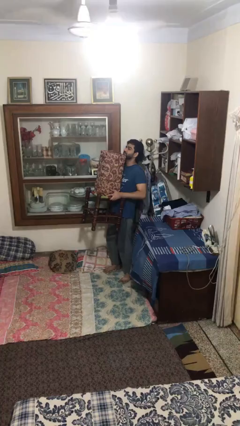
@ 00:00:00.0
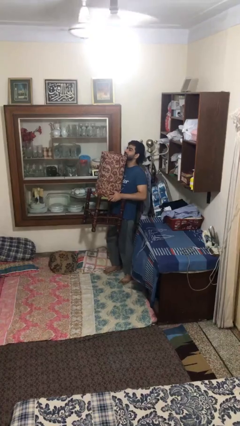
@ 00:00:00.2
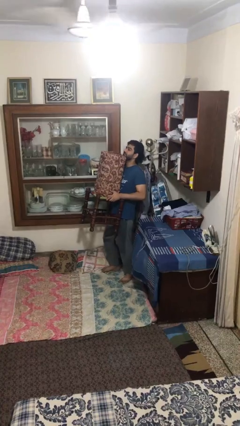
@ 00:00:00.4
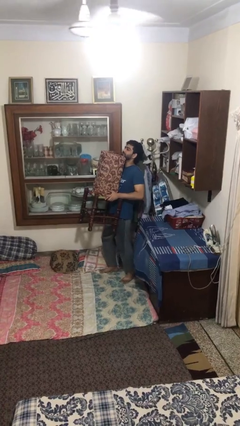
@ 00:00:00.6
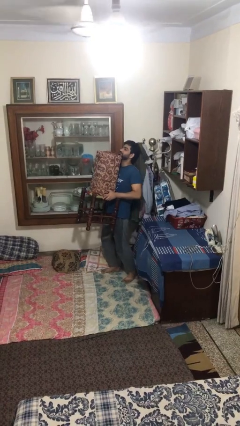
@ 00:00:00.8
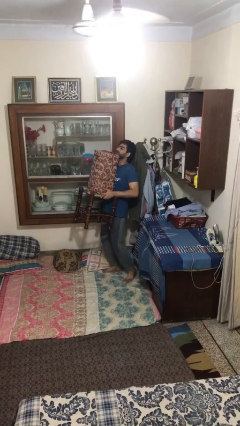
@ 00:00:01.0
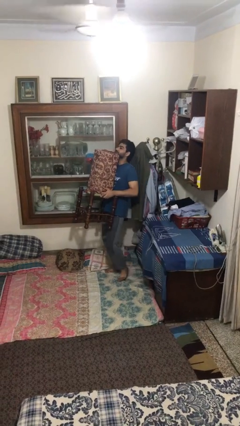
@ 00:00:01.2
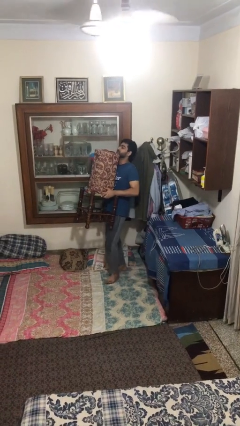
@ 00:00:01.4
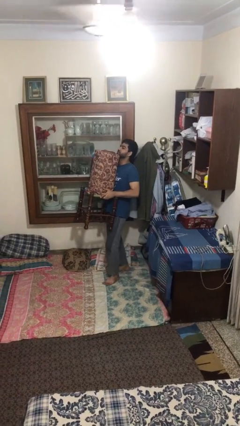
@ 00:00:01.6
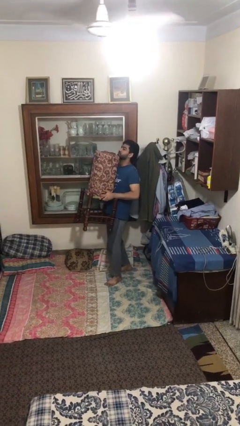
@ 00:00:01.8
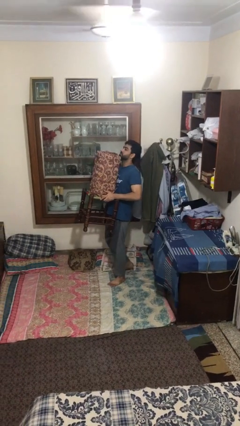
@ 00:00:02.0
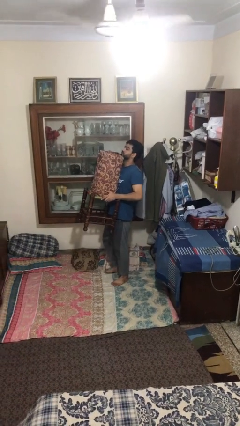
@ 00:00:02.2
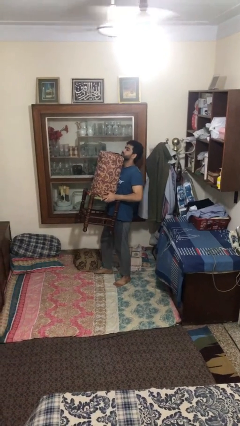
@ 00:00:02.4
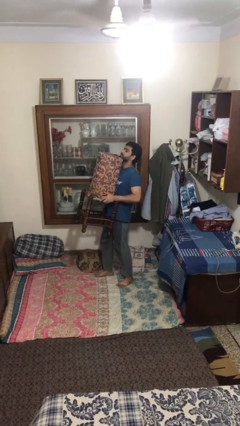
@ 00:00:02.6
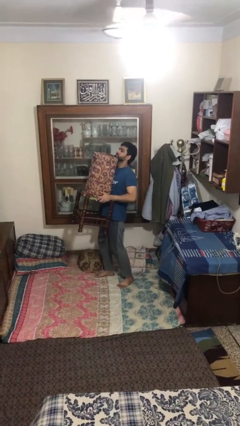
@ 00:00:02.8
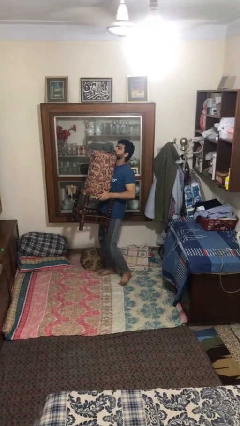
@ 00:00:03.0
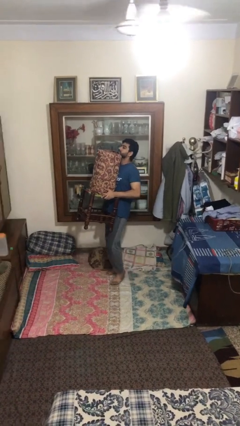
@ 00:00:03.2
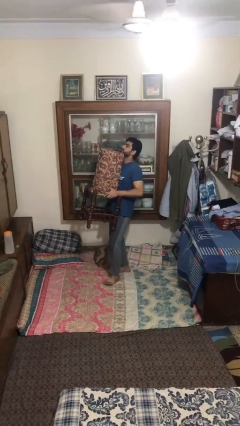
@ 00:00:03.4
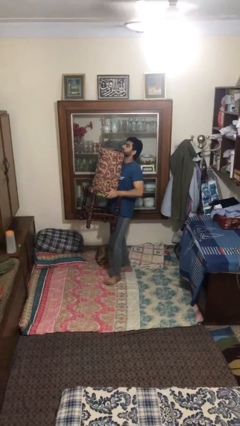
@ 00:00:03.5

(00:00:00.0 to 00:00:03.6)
person carries heavy object

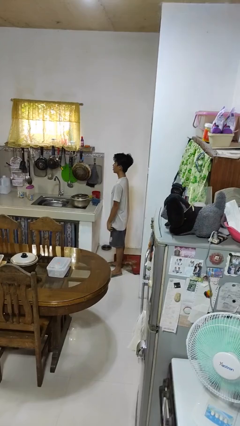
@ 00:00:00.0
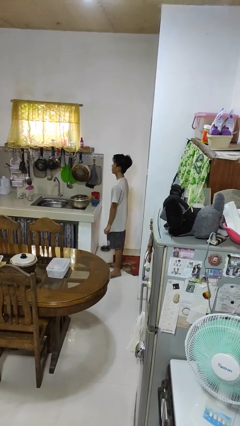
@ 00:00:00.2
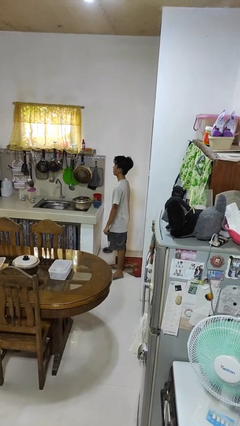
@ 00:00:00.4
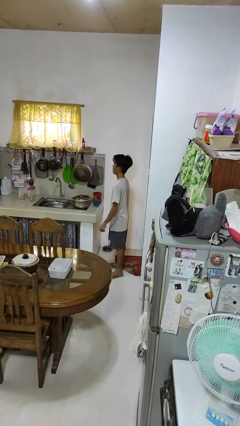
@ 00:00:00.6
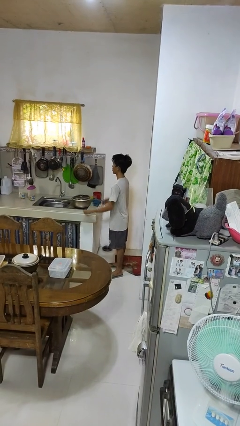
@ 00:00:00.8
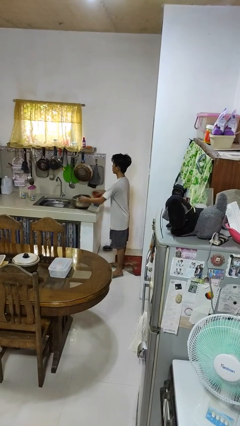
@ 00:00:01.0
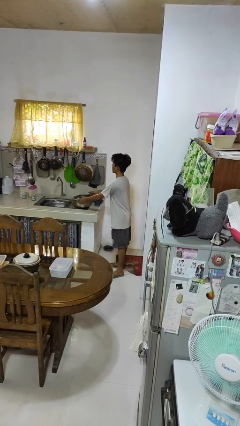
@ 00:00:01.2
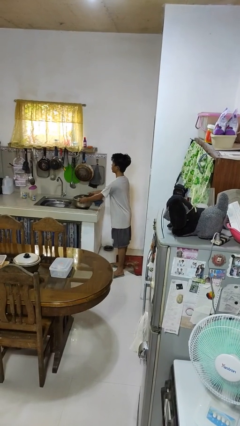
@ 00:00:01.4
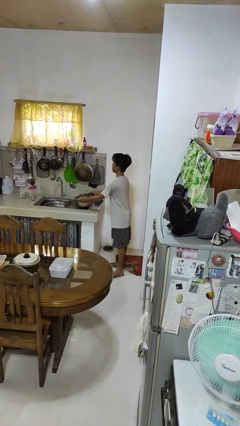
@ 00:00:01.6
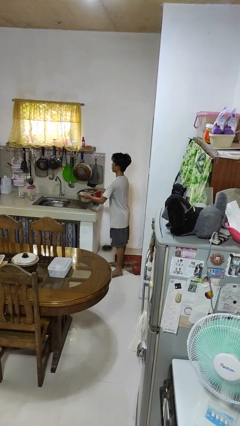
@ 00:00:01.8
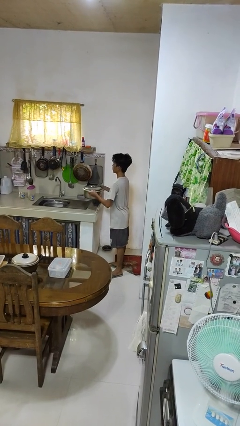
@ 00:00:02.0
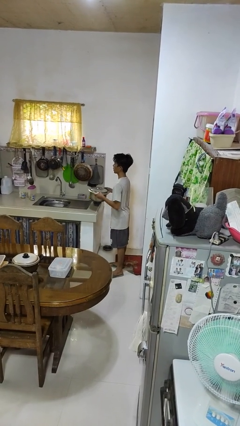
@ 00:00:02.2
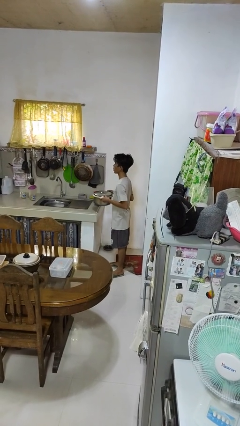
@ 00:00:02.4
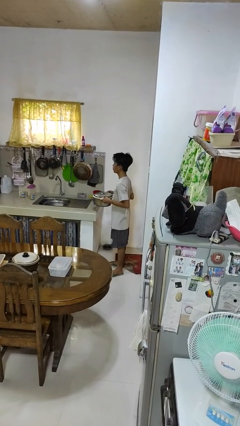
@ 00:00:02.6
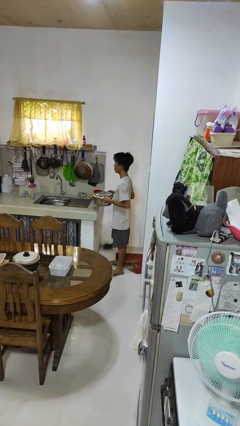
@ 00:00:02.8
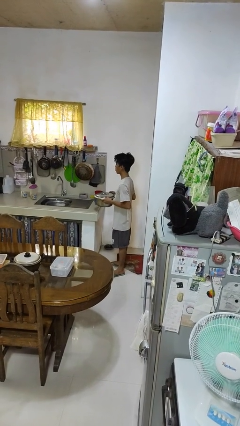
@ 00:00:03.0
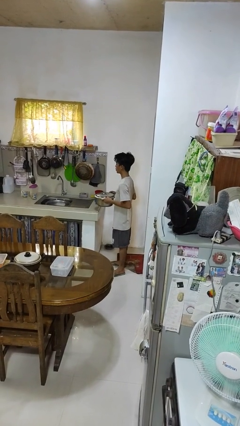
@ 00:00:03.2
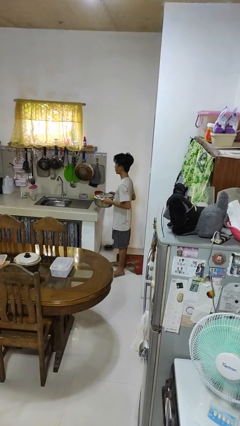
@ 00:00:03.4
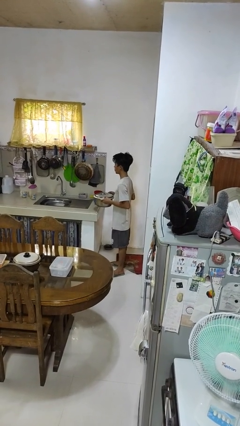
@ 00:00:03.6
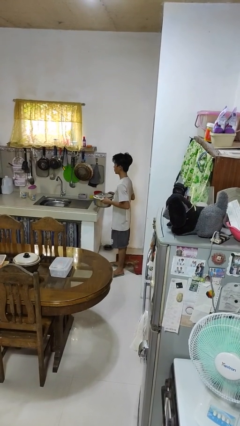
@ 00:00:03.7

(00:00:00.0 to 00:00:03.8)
person picks up object from countertop

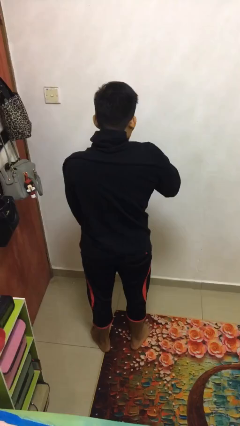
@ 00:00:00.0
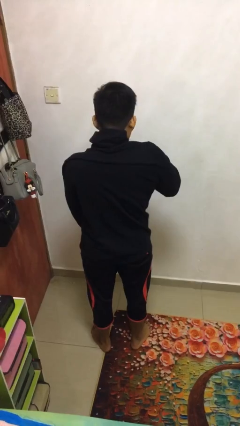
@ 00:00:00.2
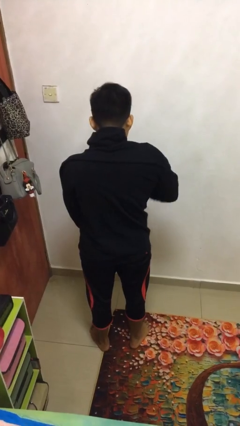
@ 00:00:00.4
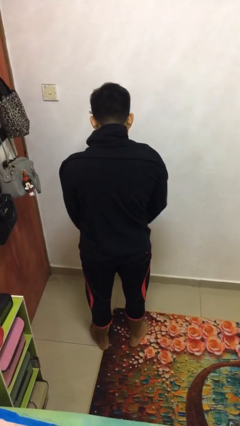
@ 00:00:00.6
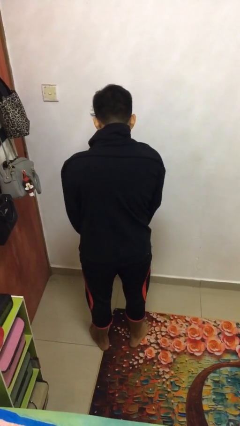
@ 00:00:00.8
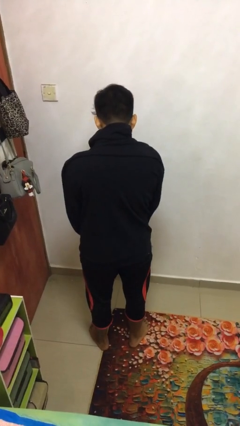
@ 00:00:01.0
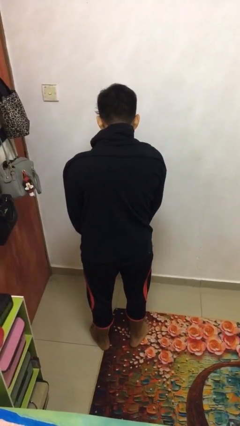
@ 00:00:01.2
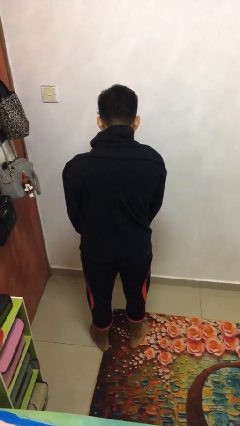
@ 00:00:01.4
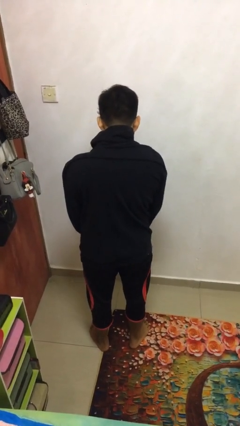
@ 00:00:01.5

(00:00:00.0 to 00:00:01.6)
person unzips jacket

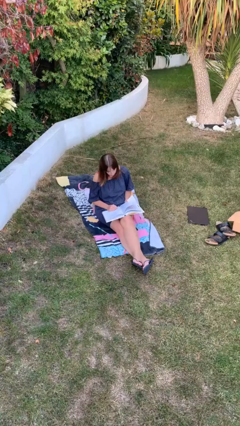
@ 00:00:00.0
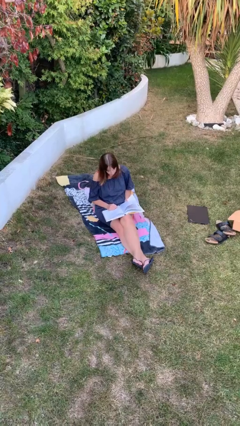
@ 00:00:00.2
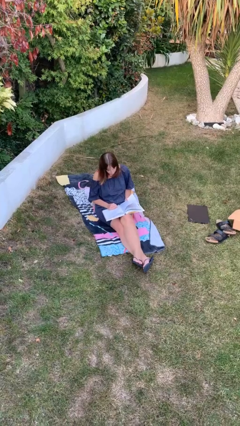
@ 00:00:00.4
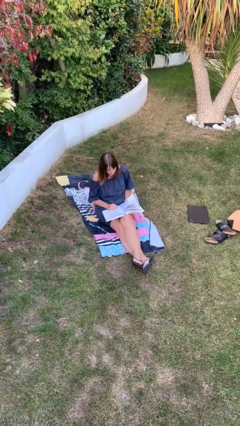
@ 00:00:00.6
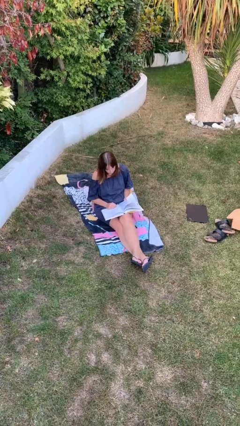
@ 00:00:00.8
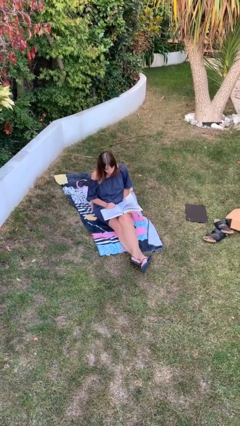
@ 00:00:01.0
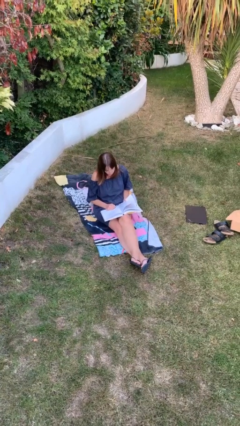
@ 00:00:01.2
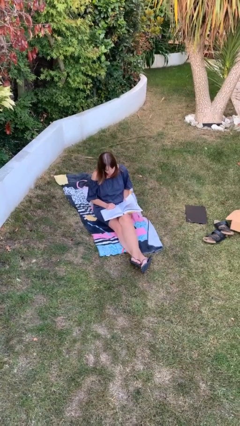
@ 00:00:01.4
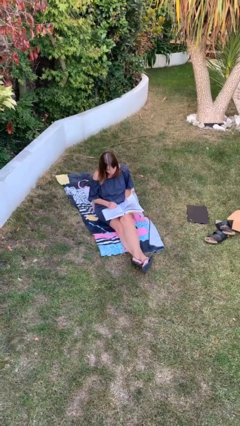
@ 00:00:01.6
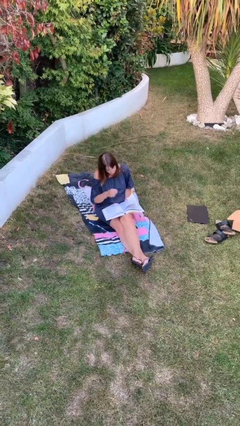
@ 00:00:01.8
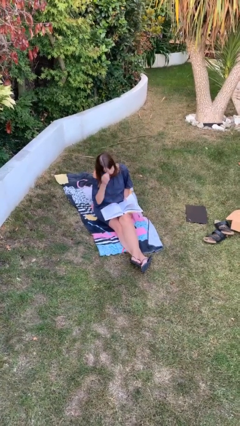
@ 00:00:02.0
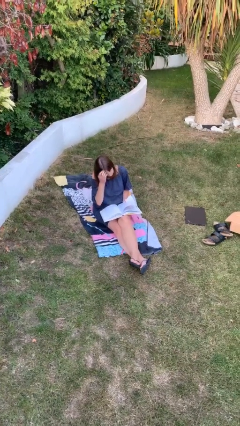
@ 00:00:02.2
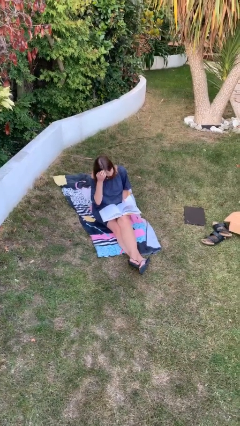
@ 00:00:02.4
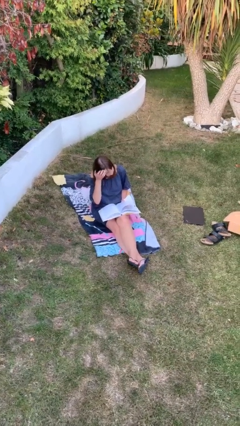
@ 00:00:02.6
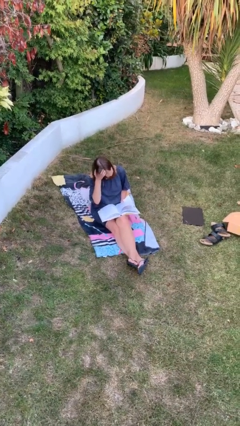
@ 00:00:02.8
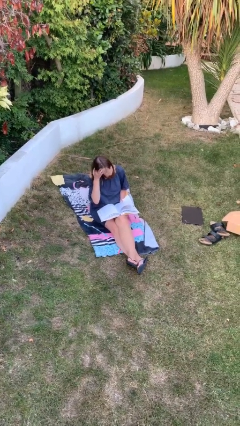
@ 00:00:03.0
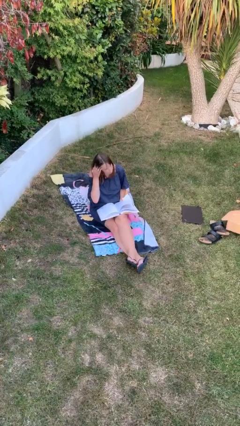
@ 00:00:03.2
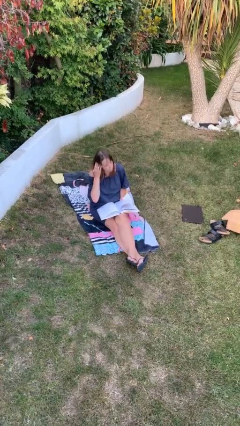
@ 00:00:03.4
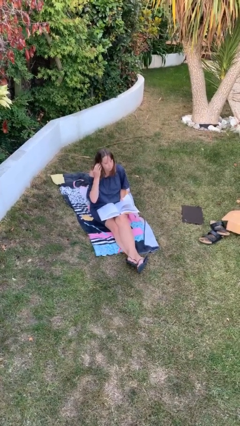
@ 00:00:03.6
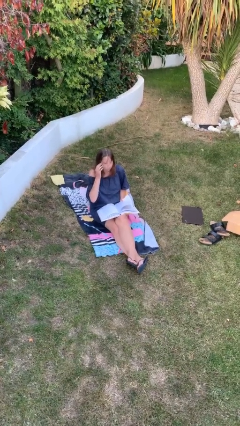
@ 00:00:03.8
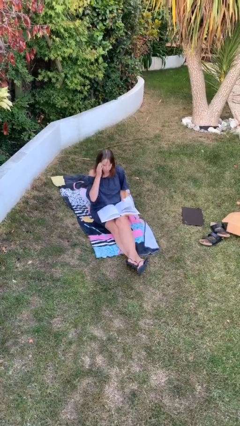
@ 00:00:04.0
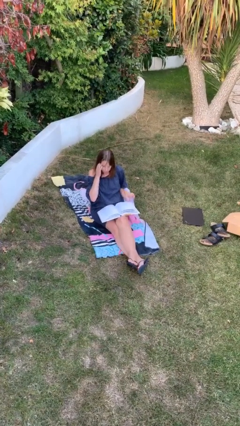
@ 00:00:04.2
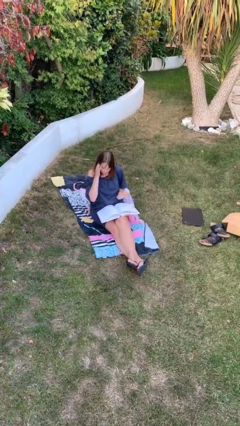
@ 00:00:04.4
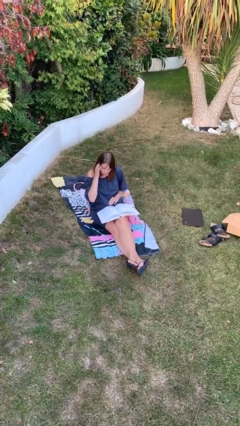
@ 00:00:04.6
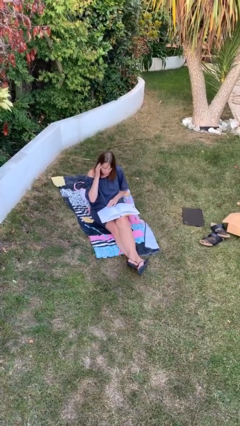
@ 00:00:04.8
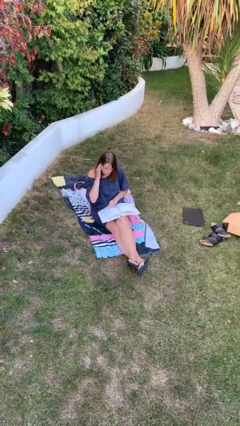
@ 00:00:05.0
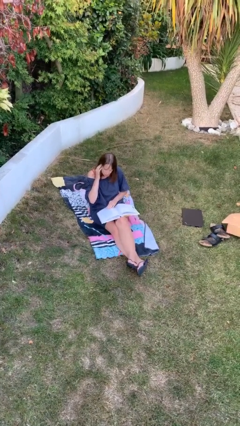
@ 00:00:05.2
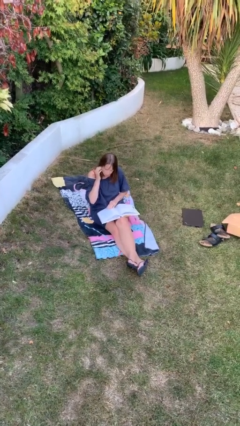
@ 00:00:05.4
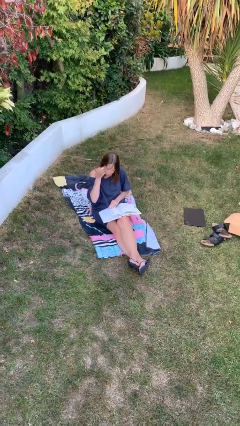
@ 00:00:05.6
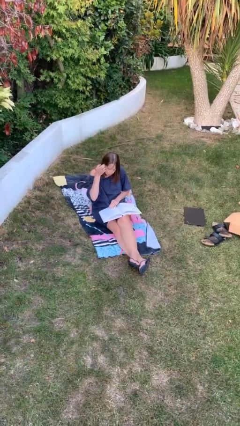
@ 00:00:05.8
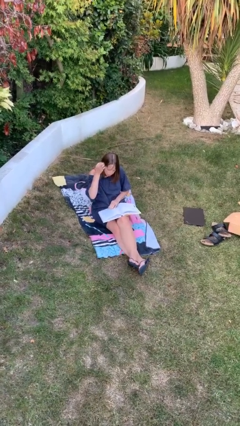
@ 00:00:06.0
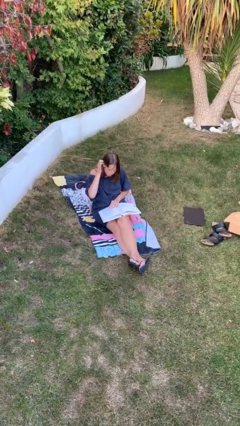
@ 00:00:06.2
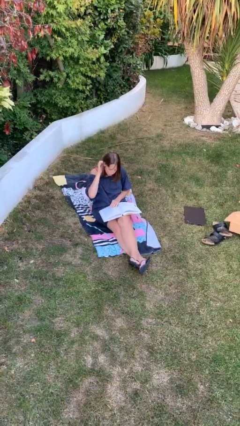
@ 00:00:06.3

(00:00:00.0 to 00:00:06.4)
person reads document

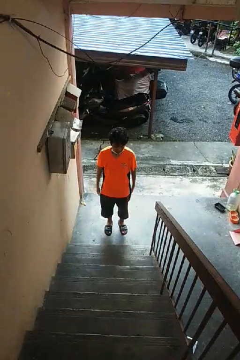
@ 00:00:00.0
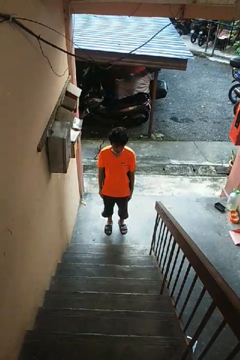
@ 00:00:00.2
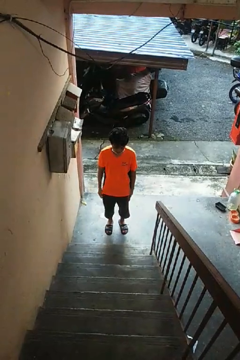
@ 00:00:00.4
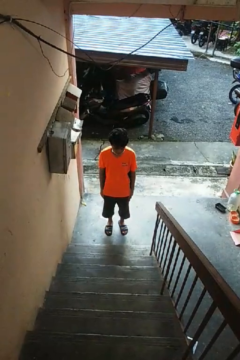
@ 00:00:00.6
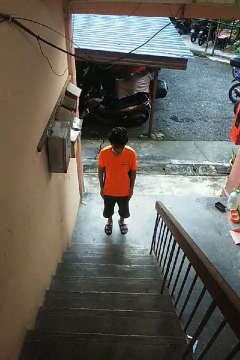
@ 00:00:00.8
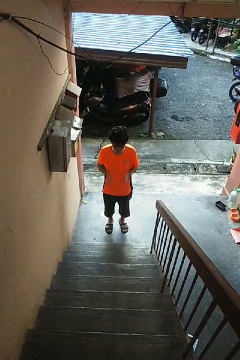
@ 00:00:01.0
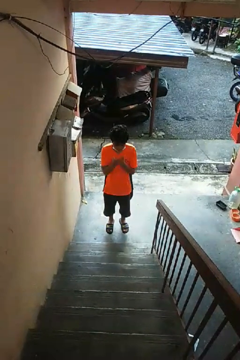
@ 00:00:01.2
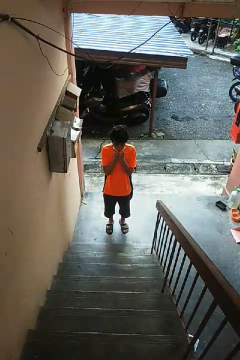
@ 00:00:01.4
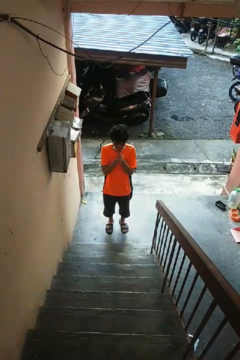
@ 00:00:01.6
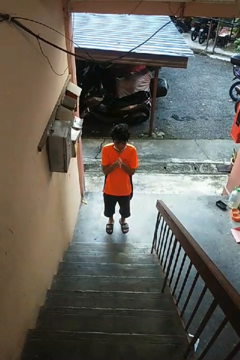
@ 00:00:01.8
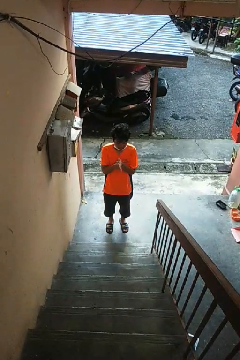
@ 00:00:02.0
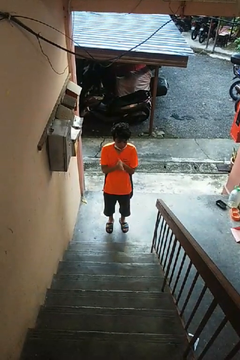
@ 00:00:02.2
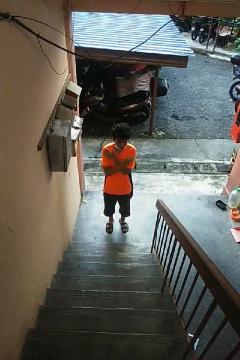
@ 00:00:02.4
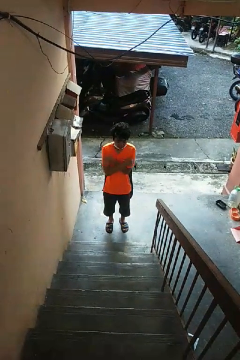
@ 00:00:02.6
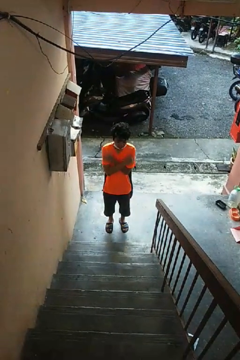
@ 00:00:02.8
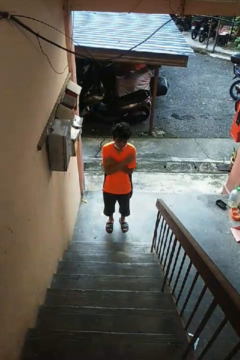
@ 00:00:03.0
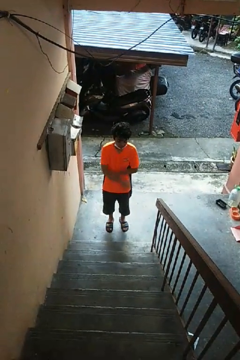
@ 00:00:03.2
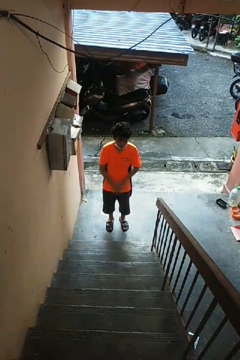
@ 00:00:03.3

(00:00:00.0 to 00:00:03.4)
person blows into hands
